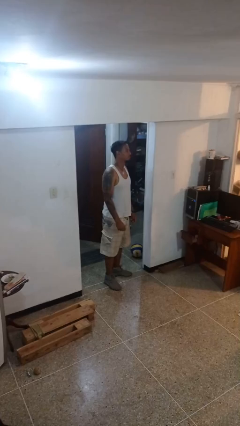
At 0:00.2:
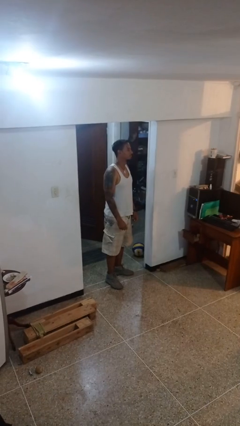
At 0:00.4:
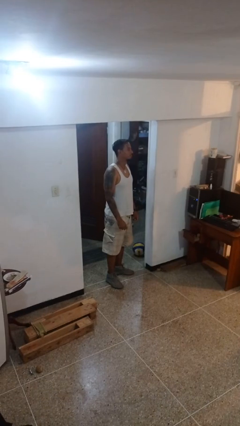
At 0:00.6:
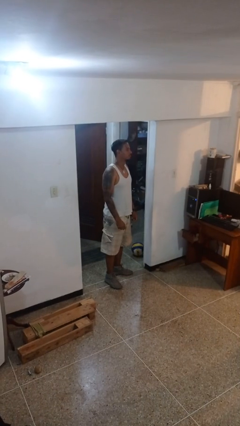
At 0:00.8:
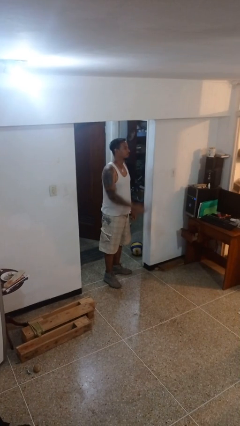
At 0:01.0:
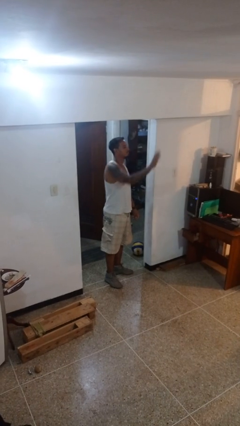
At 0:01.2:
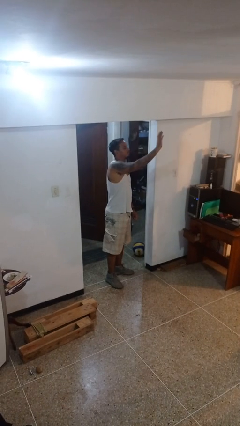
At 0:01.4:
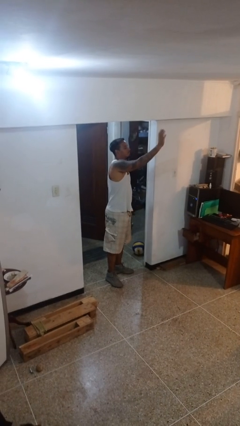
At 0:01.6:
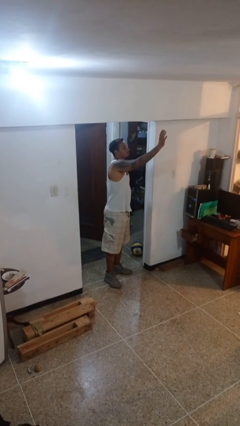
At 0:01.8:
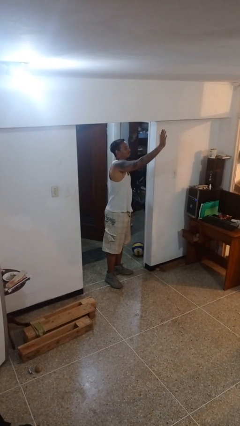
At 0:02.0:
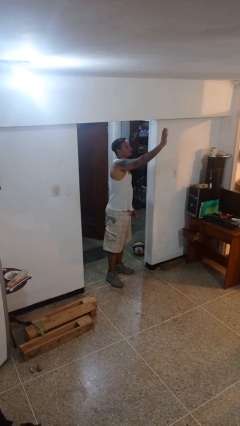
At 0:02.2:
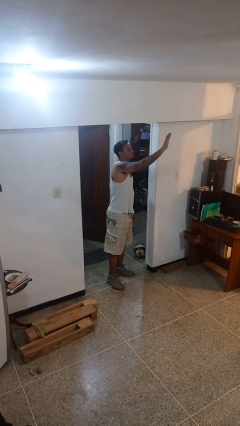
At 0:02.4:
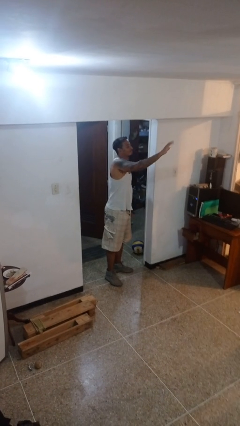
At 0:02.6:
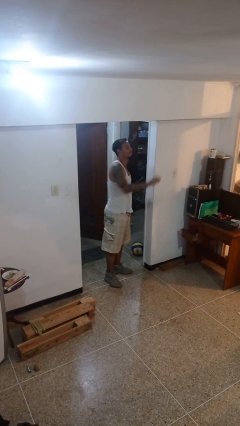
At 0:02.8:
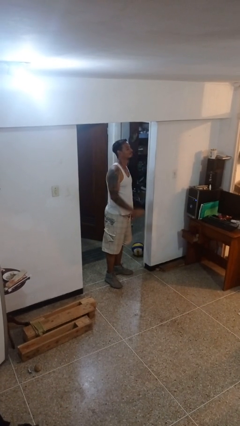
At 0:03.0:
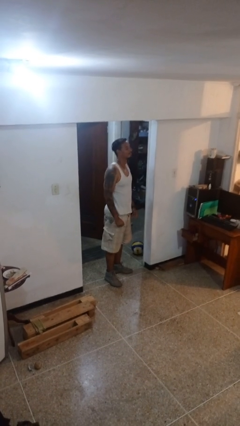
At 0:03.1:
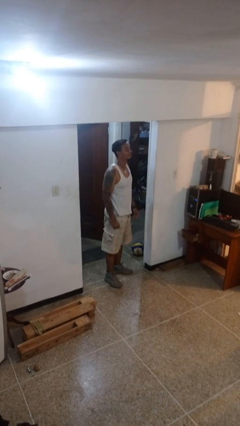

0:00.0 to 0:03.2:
person waves at person

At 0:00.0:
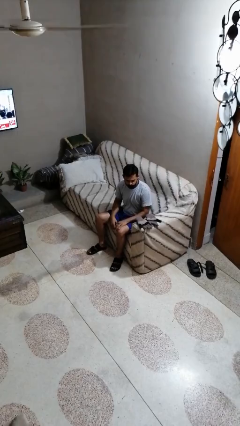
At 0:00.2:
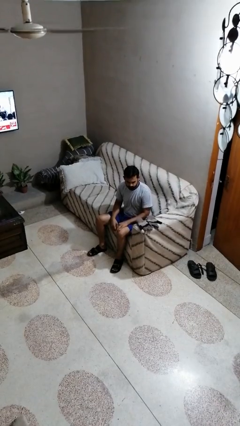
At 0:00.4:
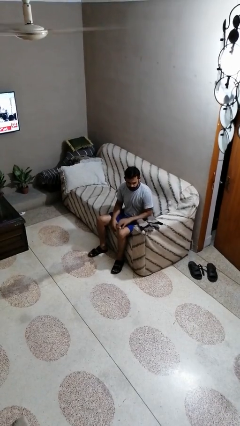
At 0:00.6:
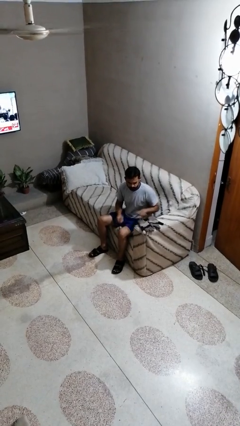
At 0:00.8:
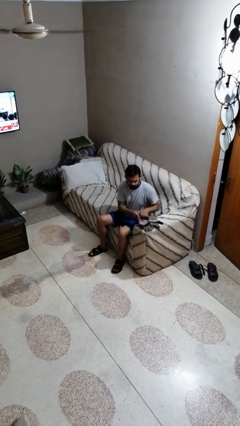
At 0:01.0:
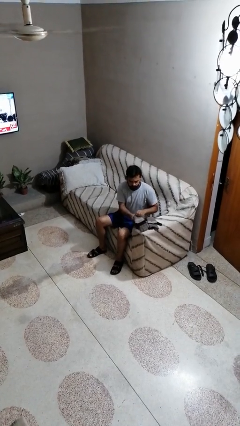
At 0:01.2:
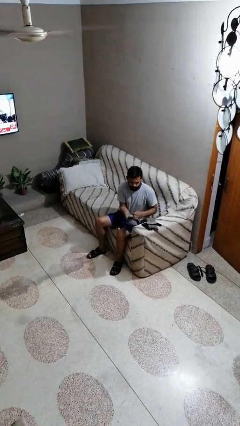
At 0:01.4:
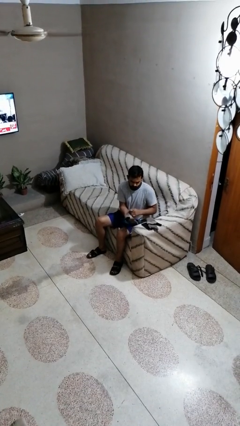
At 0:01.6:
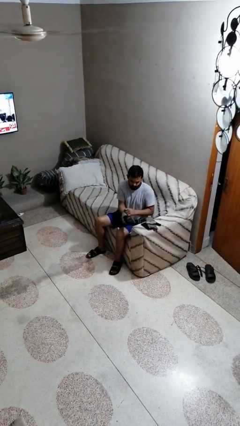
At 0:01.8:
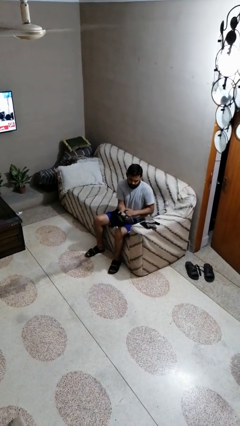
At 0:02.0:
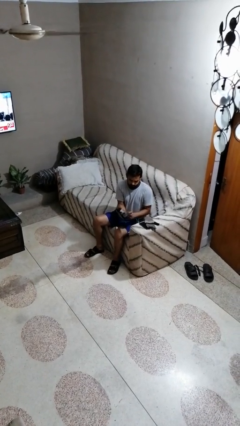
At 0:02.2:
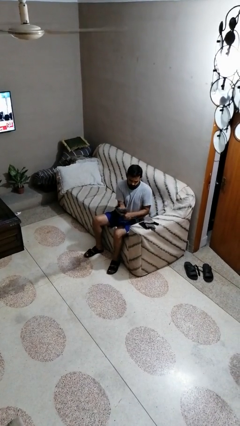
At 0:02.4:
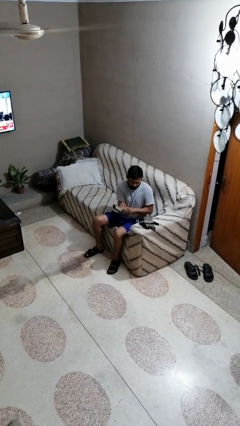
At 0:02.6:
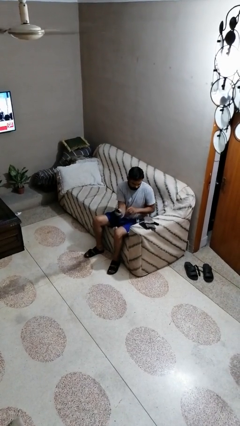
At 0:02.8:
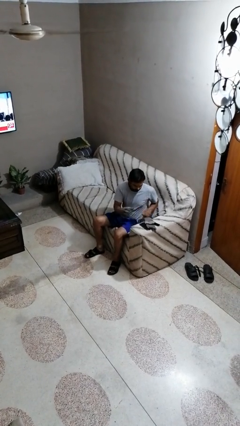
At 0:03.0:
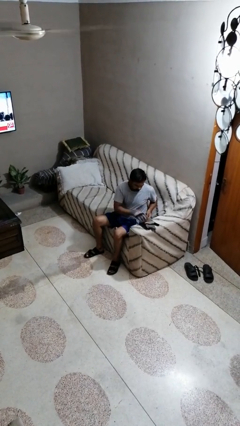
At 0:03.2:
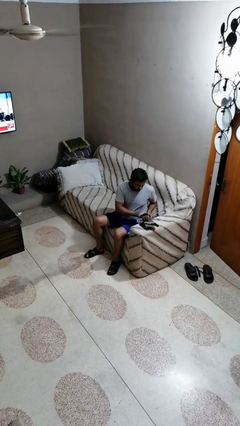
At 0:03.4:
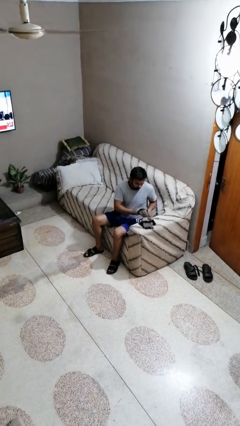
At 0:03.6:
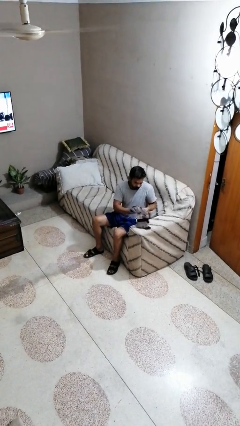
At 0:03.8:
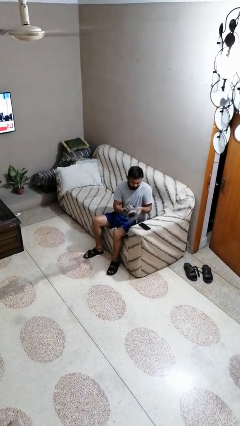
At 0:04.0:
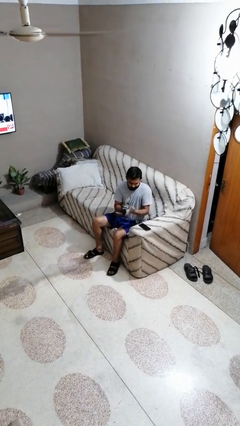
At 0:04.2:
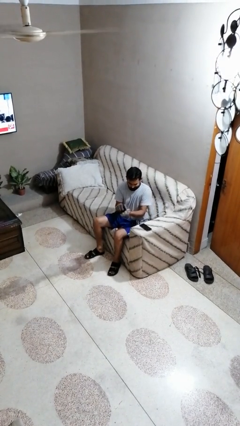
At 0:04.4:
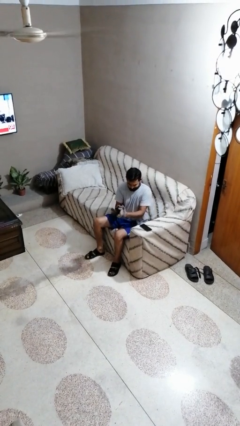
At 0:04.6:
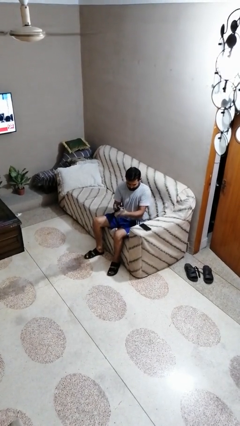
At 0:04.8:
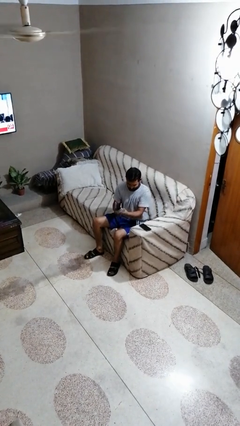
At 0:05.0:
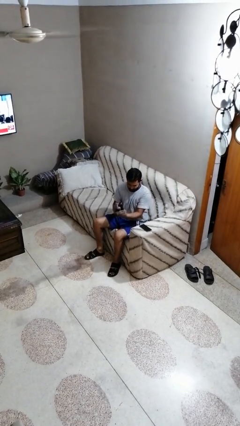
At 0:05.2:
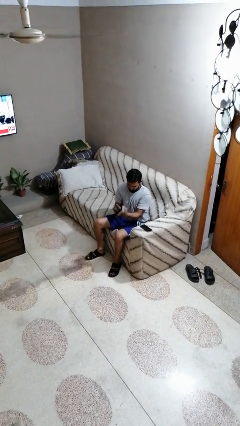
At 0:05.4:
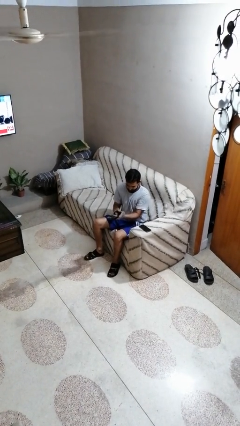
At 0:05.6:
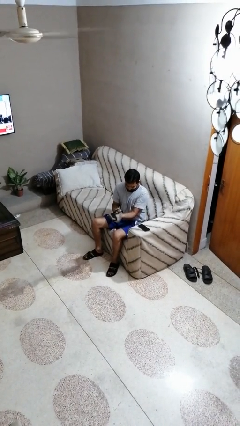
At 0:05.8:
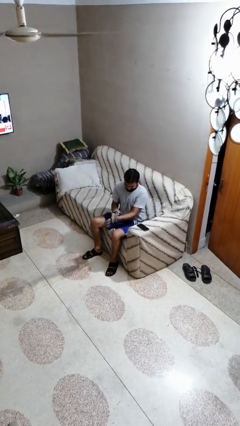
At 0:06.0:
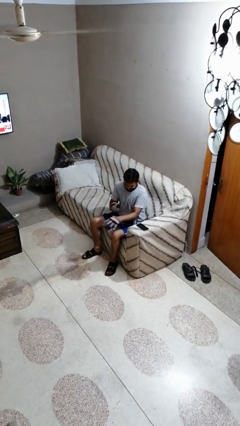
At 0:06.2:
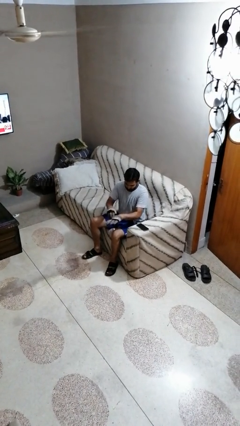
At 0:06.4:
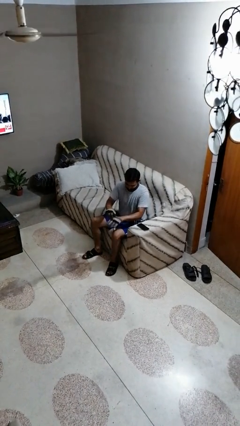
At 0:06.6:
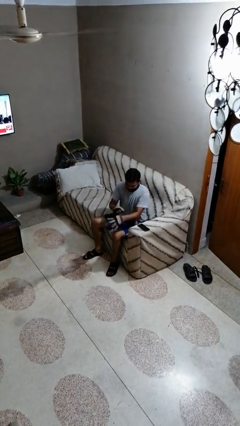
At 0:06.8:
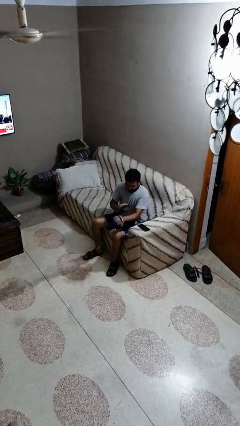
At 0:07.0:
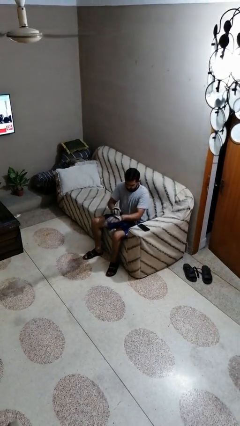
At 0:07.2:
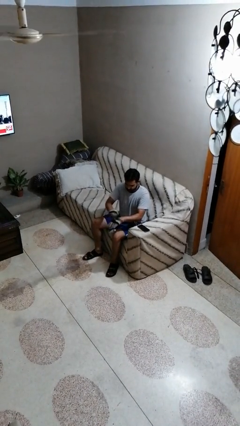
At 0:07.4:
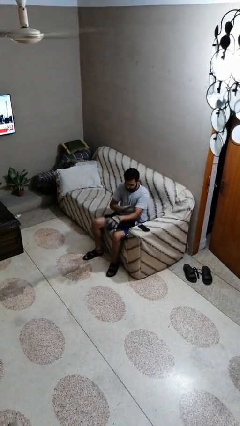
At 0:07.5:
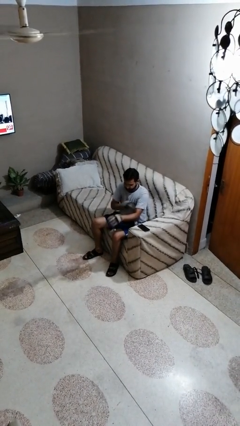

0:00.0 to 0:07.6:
person puts on gloves

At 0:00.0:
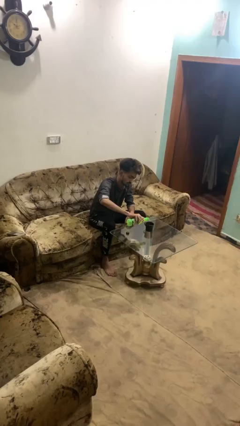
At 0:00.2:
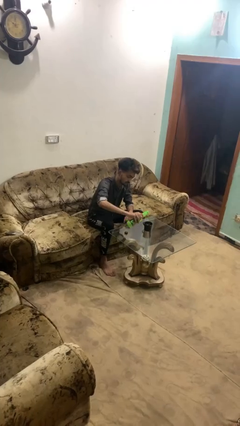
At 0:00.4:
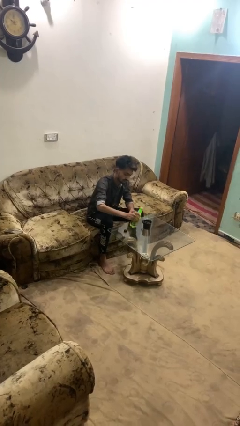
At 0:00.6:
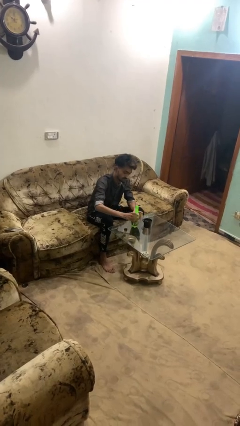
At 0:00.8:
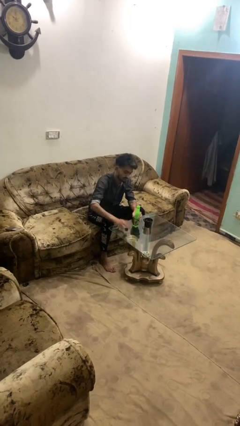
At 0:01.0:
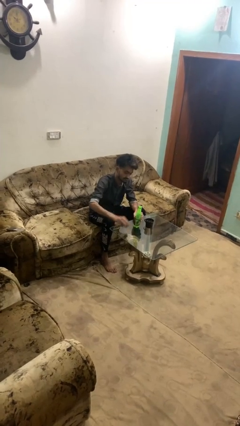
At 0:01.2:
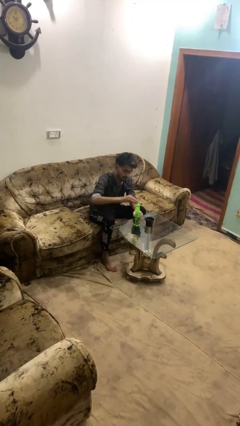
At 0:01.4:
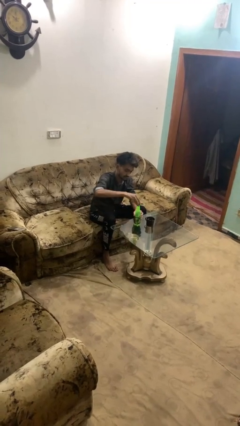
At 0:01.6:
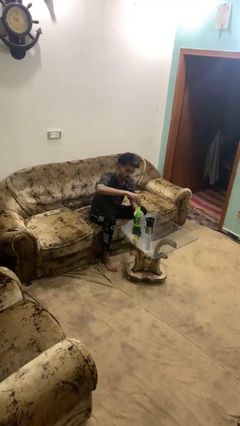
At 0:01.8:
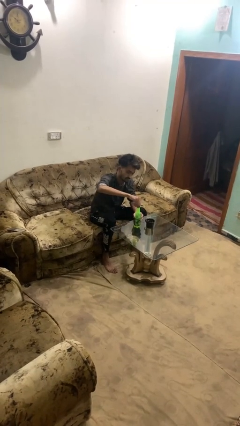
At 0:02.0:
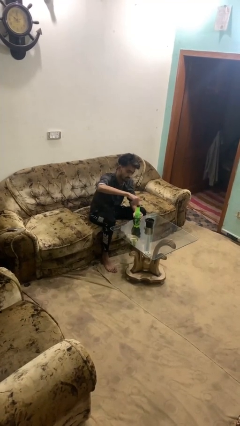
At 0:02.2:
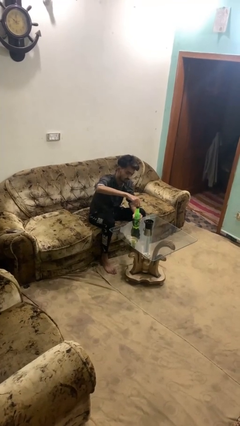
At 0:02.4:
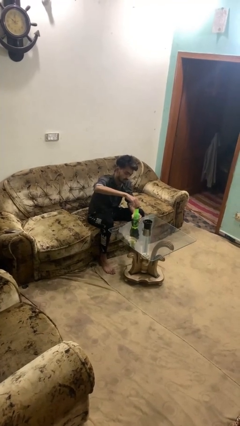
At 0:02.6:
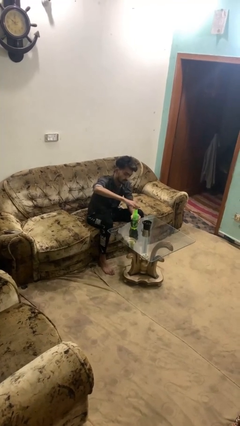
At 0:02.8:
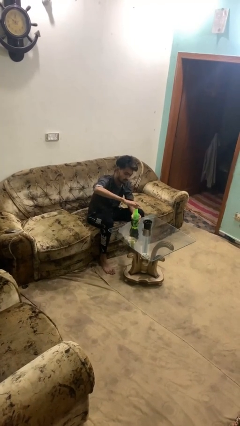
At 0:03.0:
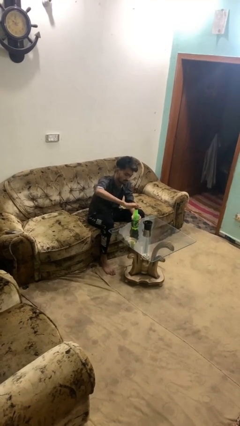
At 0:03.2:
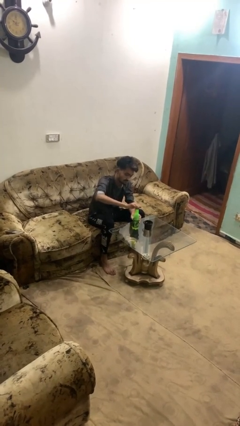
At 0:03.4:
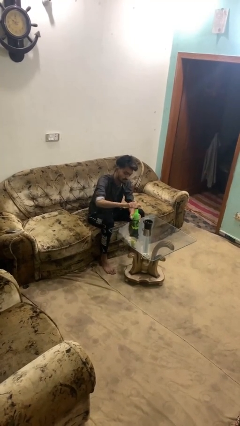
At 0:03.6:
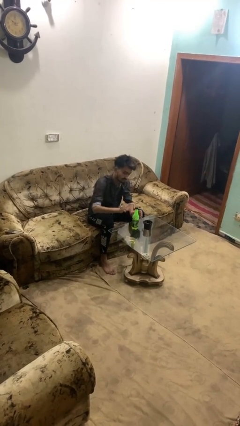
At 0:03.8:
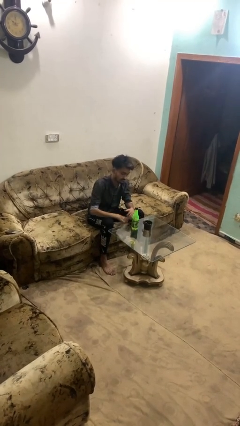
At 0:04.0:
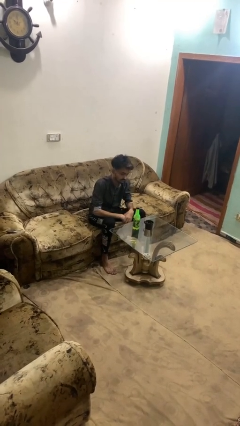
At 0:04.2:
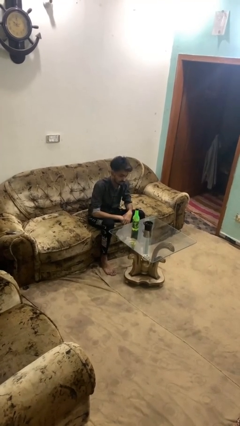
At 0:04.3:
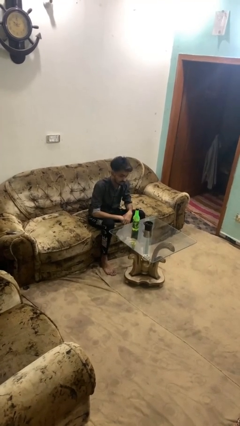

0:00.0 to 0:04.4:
person screws lid to bottle

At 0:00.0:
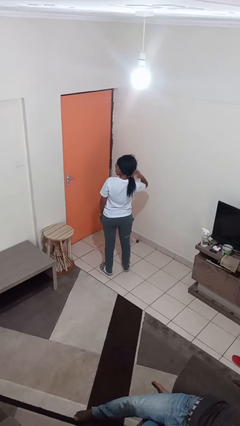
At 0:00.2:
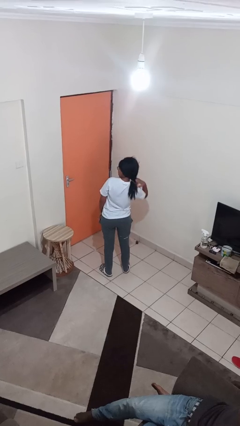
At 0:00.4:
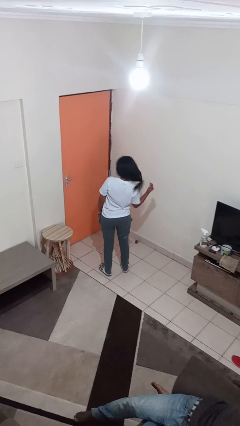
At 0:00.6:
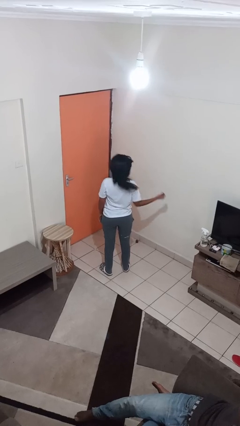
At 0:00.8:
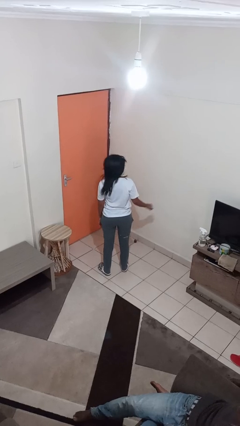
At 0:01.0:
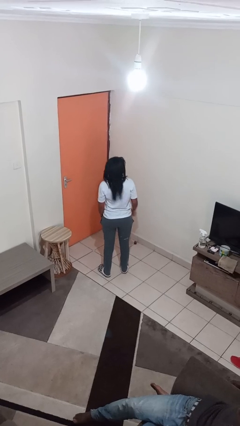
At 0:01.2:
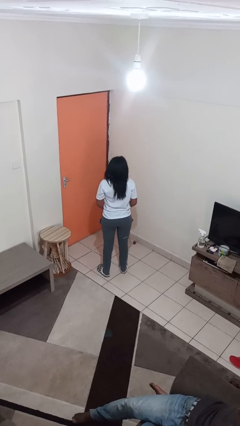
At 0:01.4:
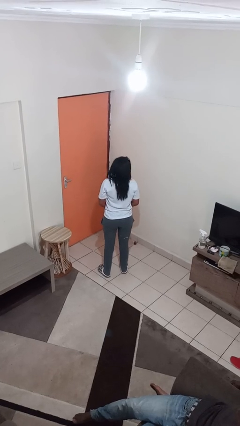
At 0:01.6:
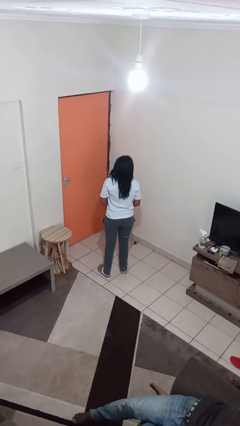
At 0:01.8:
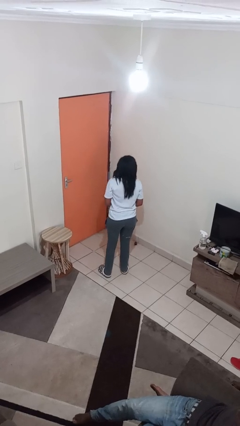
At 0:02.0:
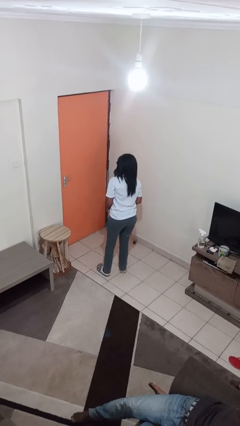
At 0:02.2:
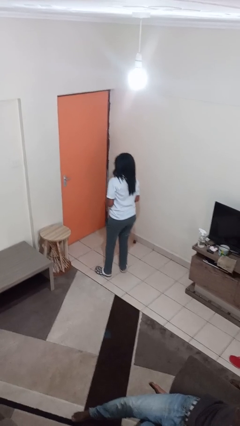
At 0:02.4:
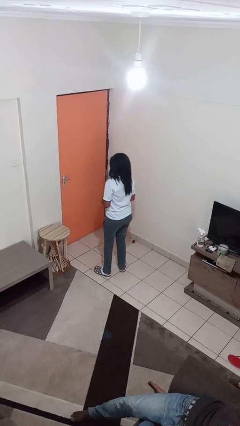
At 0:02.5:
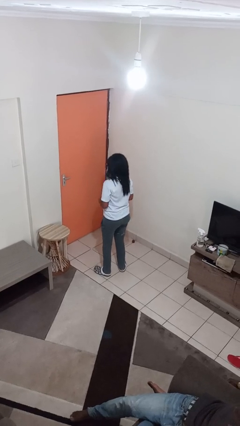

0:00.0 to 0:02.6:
person takes off hairtie

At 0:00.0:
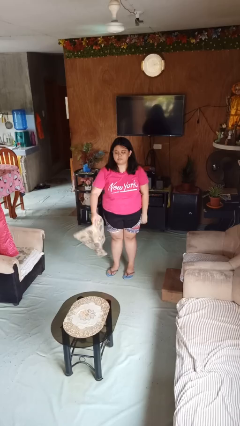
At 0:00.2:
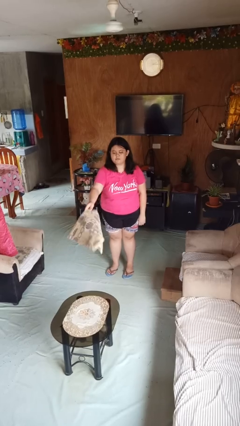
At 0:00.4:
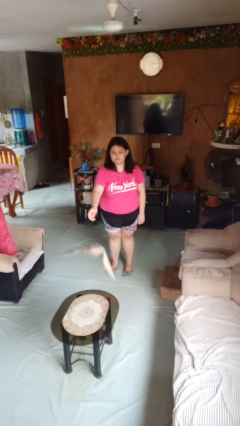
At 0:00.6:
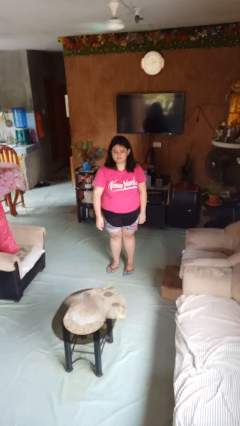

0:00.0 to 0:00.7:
person throws object on table
